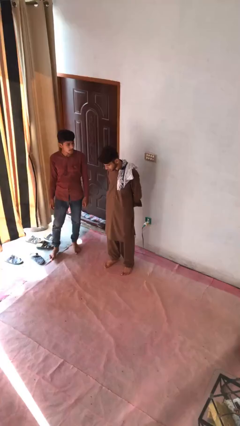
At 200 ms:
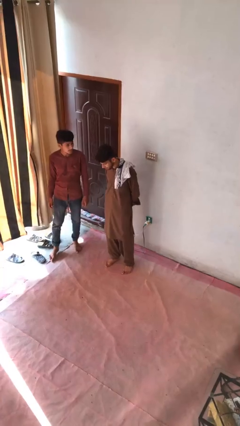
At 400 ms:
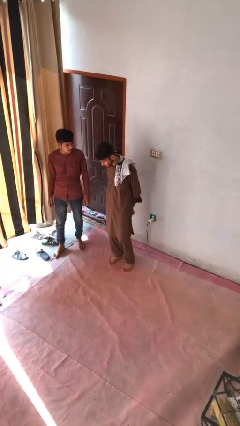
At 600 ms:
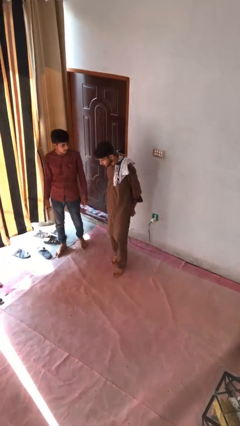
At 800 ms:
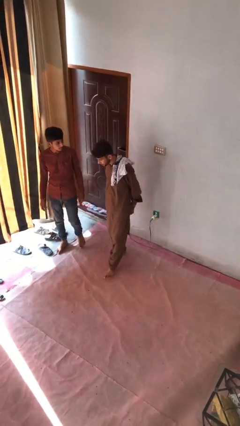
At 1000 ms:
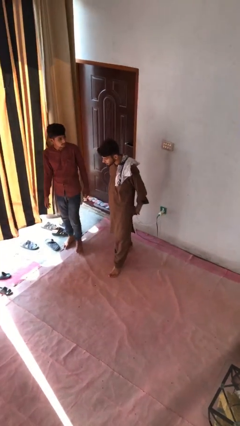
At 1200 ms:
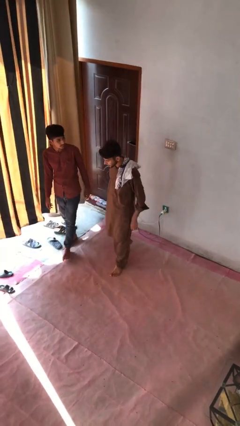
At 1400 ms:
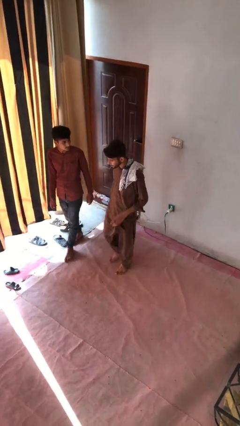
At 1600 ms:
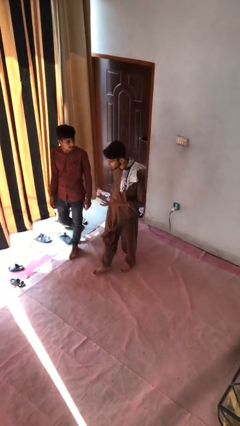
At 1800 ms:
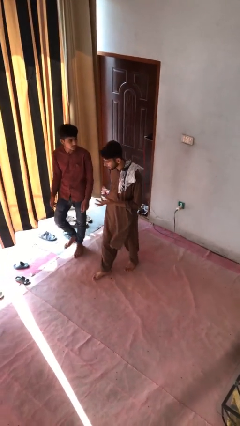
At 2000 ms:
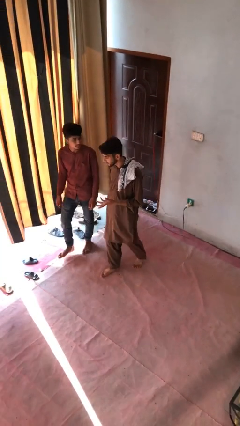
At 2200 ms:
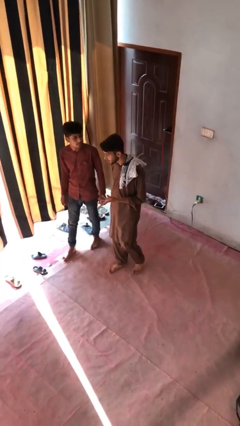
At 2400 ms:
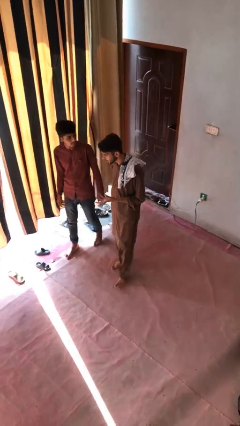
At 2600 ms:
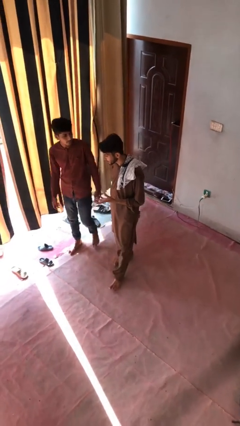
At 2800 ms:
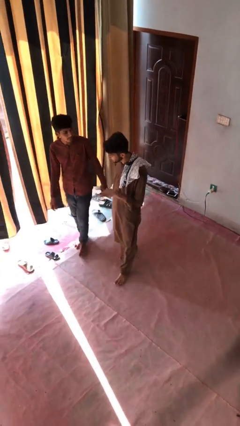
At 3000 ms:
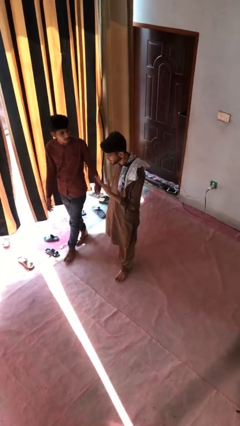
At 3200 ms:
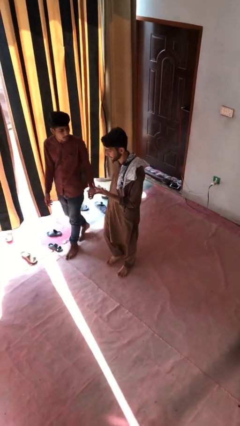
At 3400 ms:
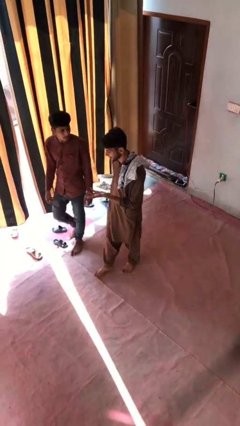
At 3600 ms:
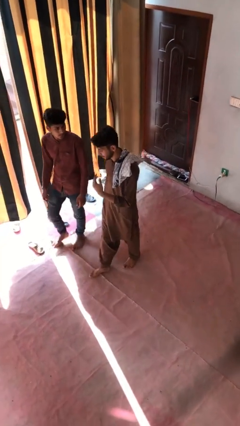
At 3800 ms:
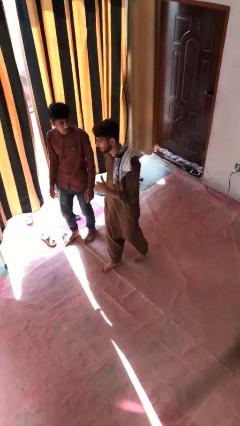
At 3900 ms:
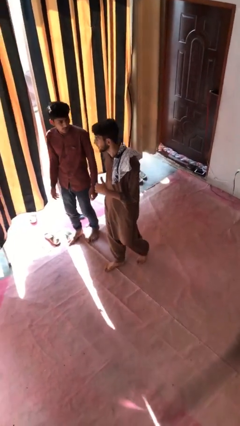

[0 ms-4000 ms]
person talks to person

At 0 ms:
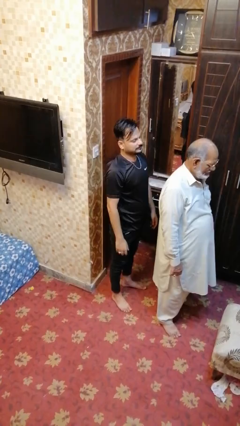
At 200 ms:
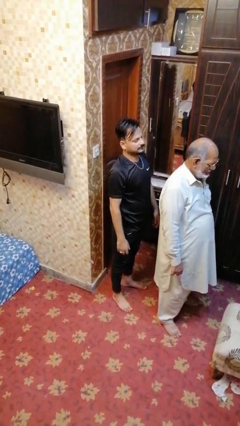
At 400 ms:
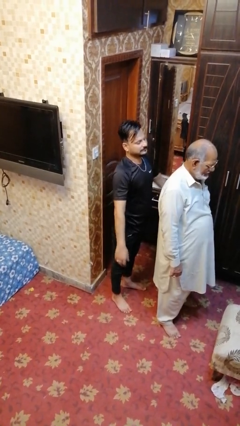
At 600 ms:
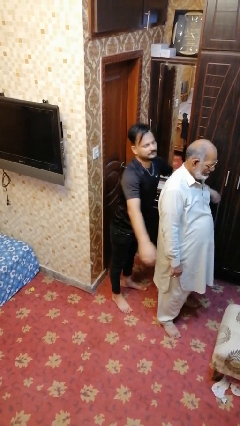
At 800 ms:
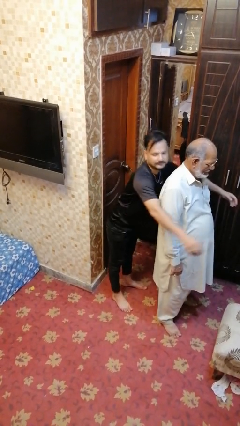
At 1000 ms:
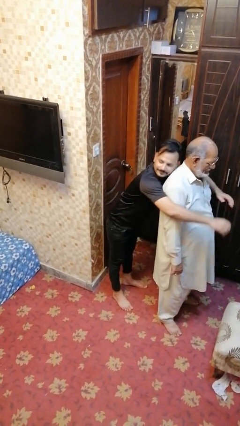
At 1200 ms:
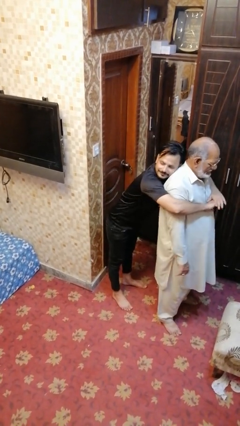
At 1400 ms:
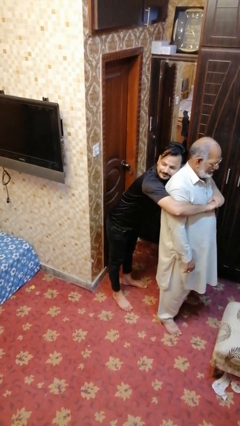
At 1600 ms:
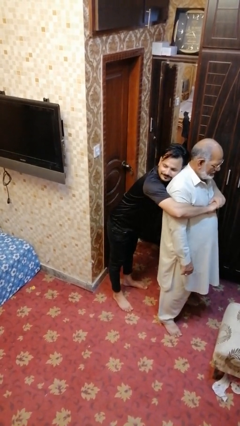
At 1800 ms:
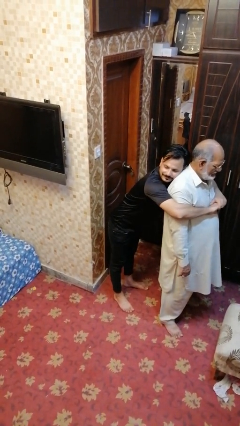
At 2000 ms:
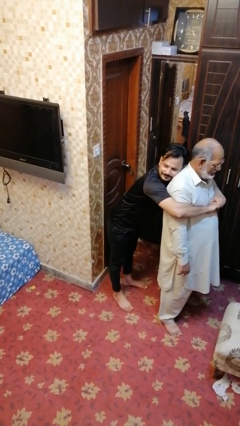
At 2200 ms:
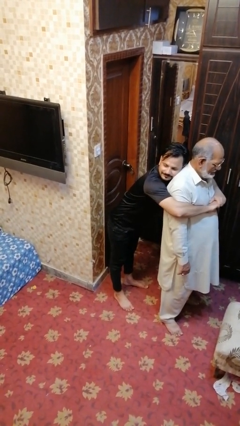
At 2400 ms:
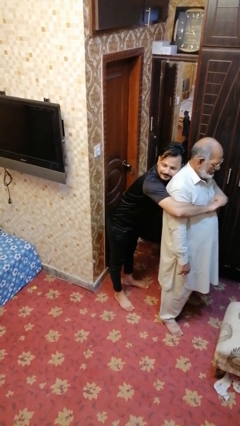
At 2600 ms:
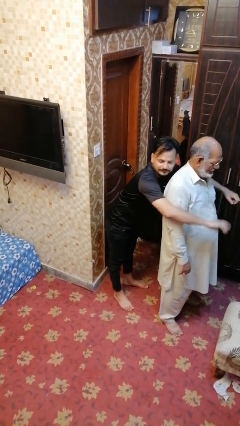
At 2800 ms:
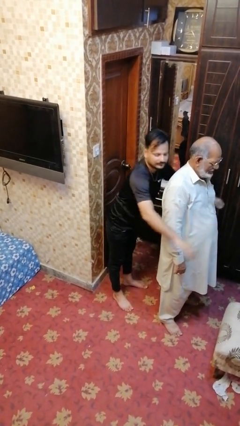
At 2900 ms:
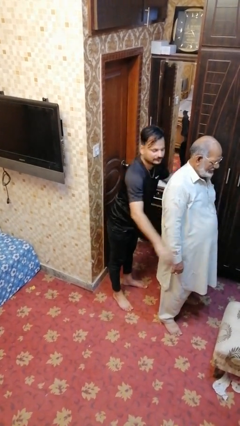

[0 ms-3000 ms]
person hugs person from behind

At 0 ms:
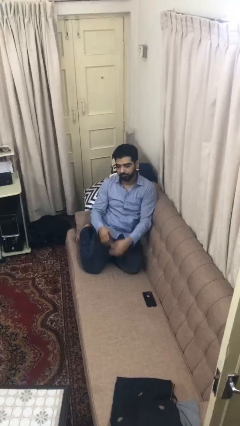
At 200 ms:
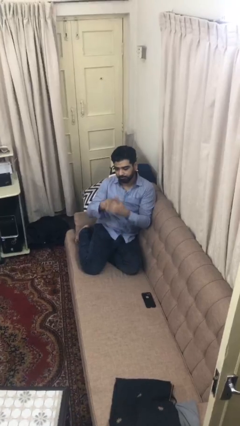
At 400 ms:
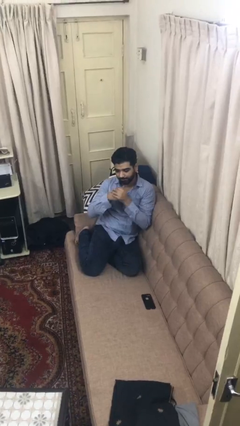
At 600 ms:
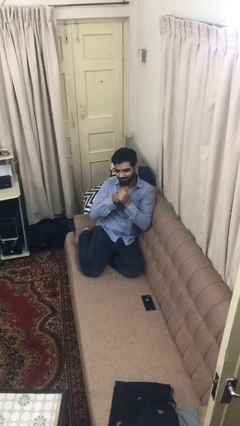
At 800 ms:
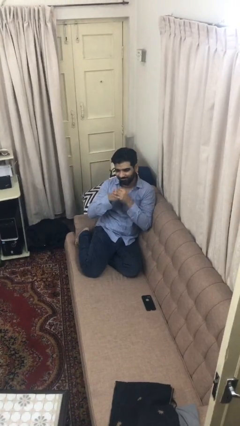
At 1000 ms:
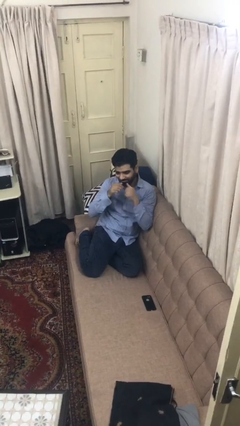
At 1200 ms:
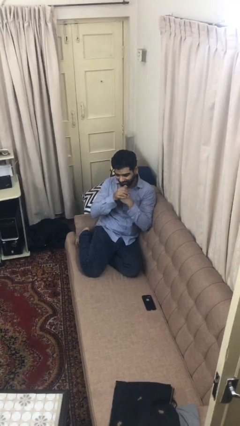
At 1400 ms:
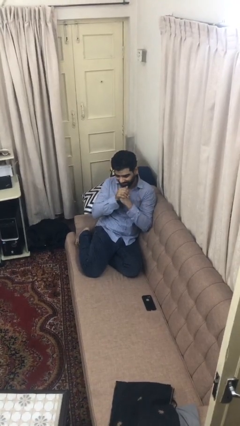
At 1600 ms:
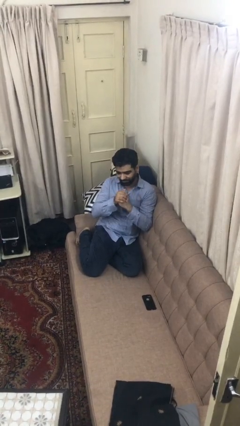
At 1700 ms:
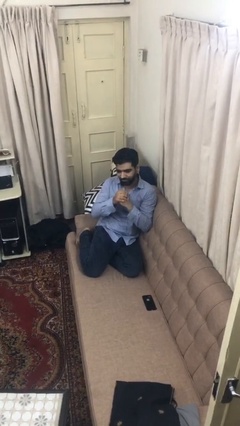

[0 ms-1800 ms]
person cracks knuckles

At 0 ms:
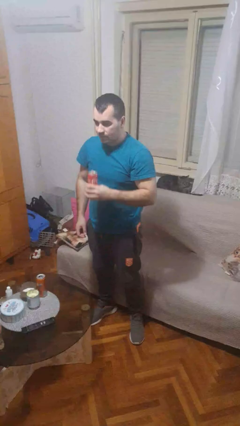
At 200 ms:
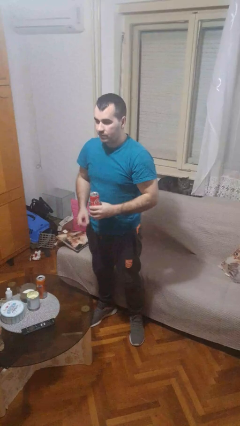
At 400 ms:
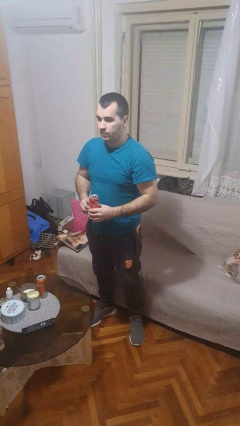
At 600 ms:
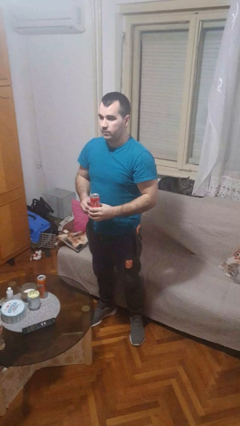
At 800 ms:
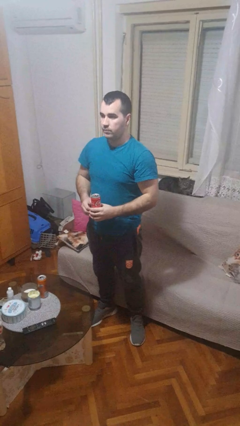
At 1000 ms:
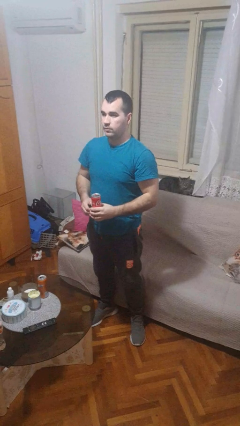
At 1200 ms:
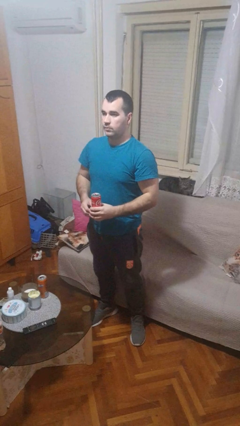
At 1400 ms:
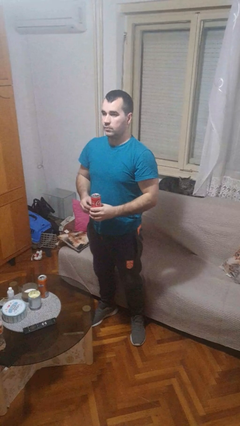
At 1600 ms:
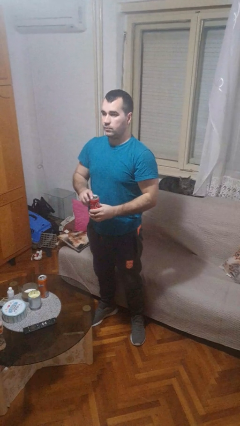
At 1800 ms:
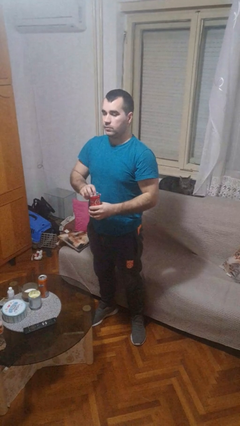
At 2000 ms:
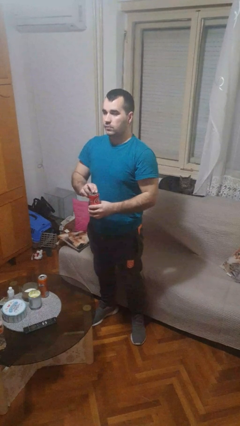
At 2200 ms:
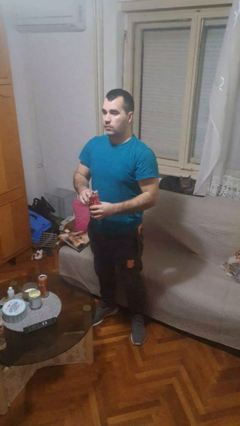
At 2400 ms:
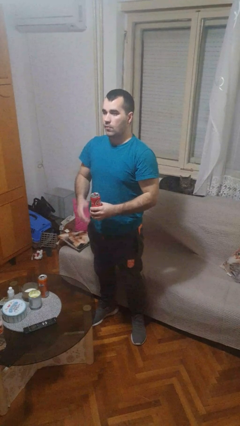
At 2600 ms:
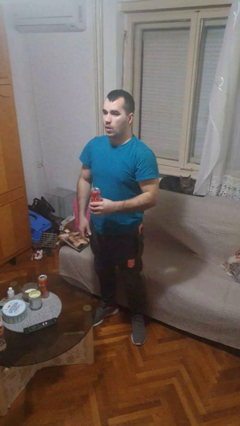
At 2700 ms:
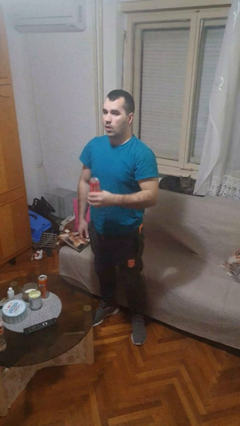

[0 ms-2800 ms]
person opens beverage can

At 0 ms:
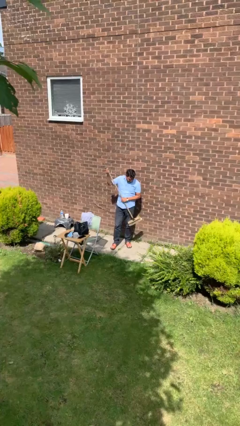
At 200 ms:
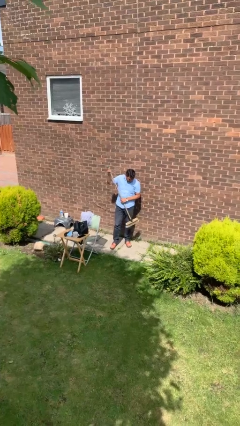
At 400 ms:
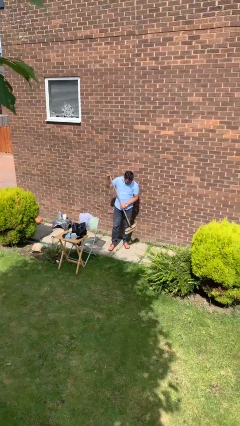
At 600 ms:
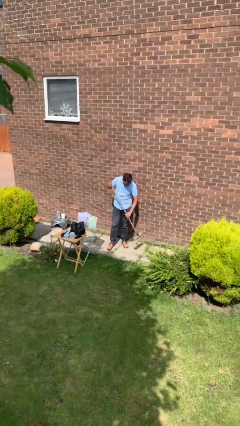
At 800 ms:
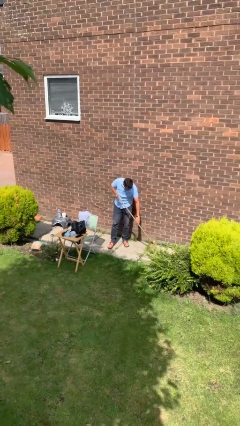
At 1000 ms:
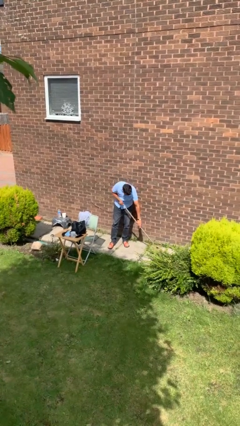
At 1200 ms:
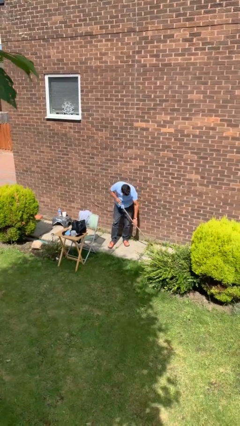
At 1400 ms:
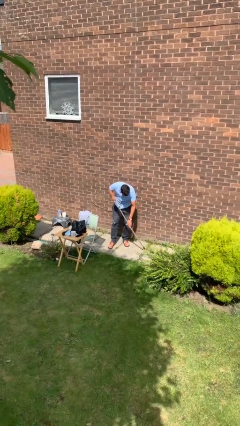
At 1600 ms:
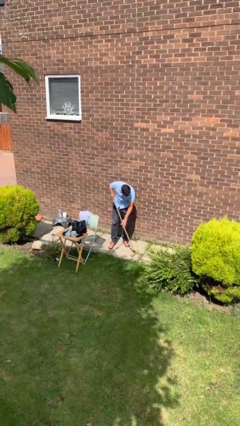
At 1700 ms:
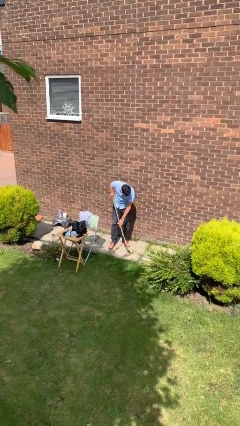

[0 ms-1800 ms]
person sweeps floor

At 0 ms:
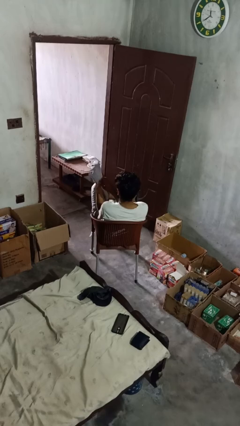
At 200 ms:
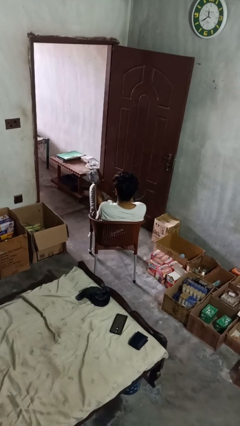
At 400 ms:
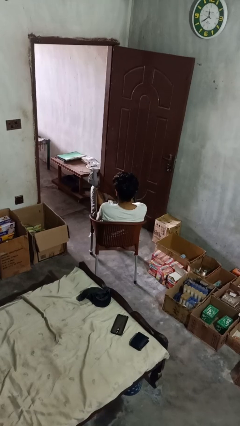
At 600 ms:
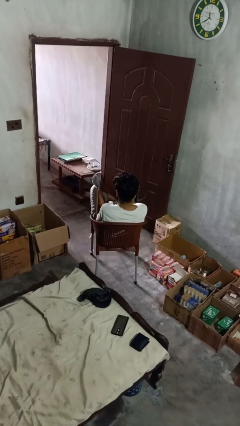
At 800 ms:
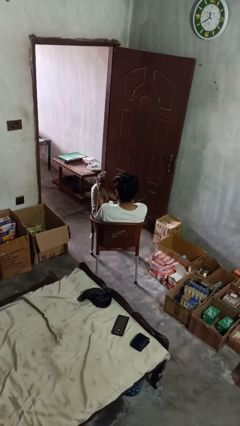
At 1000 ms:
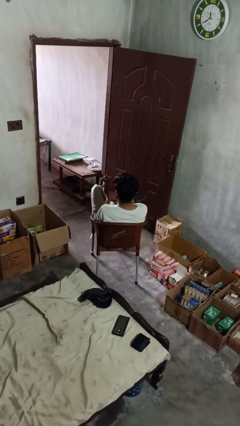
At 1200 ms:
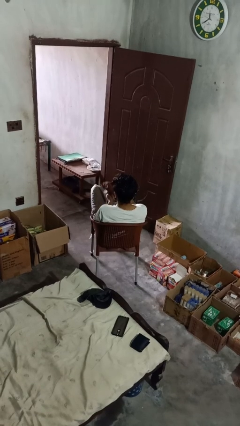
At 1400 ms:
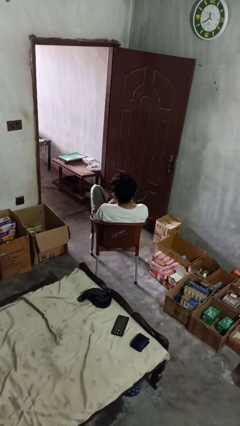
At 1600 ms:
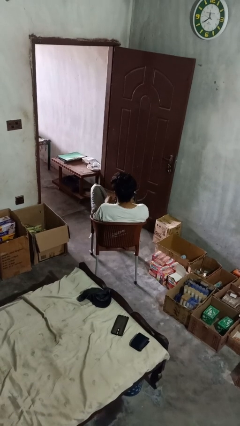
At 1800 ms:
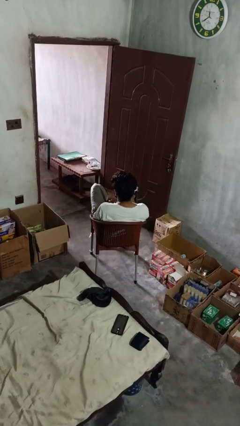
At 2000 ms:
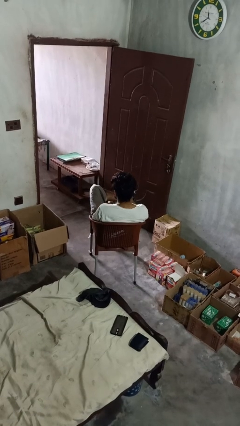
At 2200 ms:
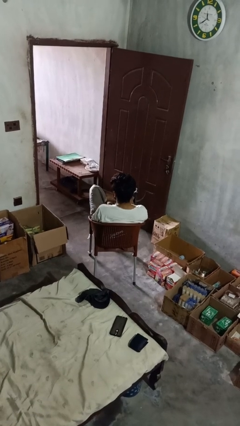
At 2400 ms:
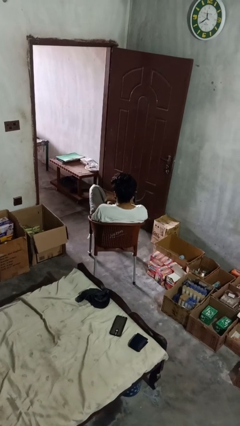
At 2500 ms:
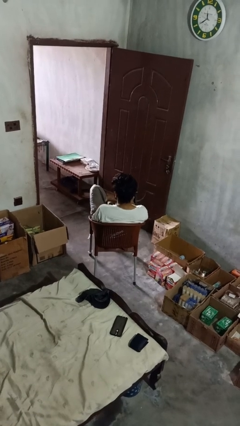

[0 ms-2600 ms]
person takes off gloves

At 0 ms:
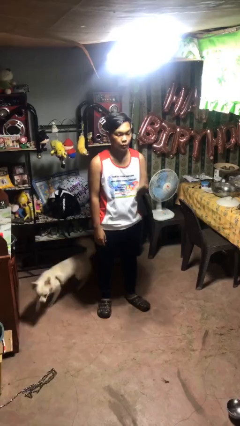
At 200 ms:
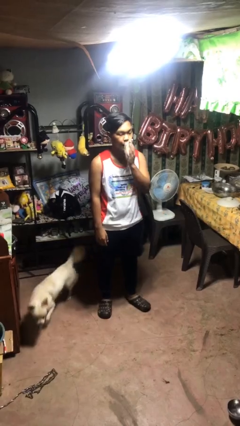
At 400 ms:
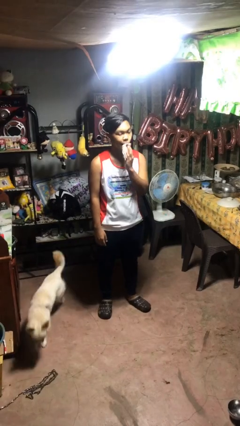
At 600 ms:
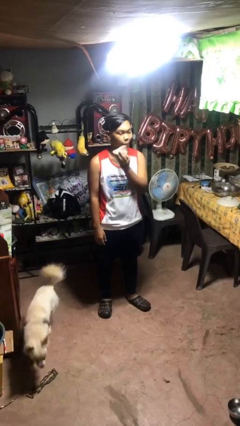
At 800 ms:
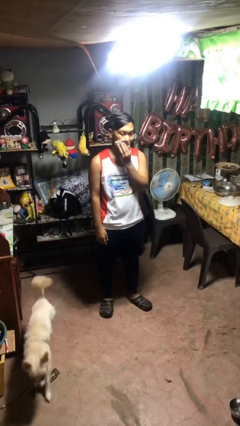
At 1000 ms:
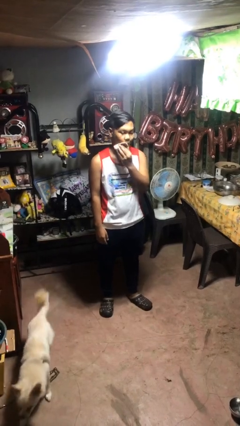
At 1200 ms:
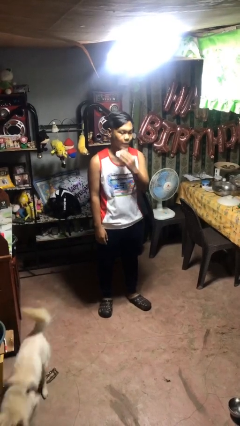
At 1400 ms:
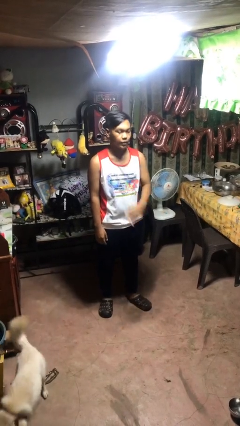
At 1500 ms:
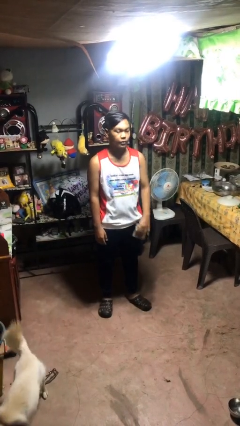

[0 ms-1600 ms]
person wipes mouth with napkin
